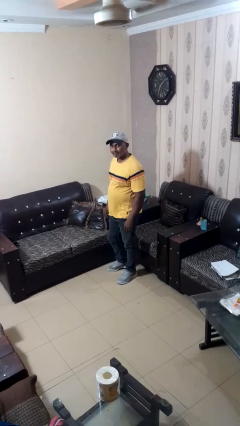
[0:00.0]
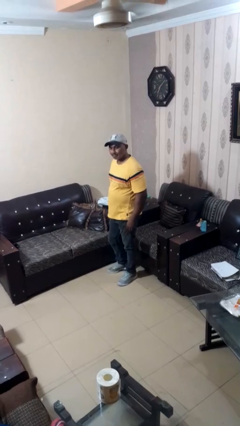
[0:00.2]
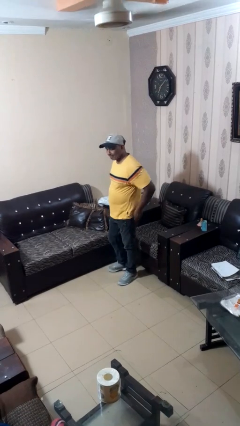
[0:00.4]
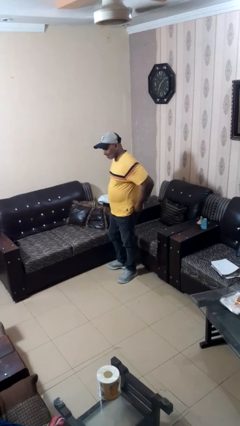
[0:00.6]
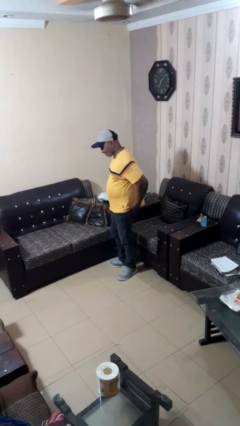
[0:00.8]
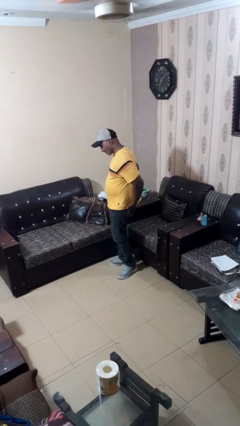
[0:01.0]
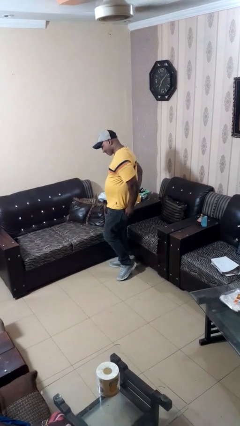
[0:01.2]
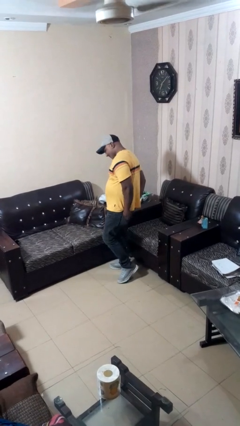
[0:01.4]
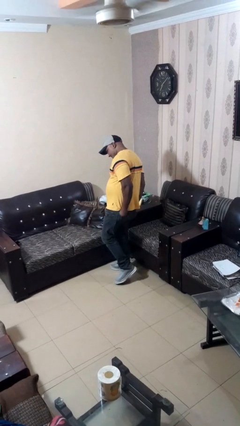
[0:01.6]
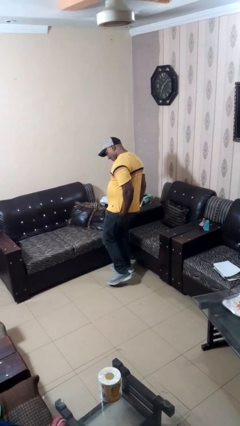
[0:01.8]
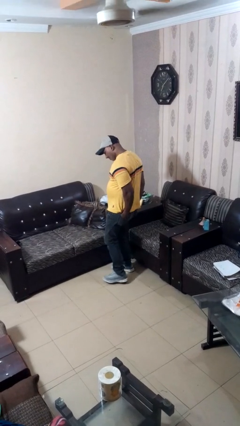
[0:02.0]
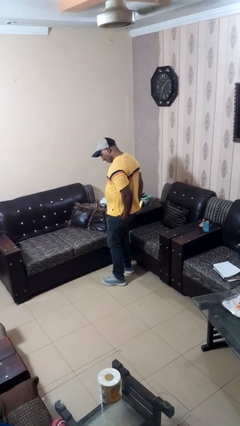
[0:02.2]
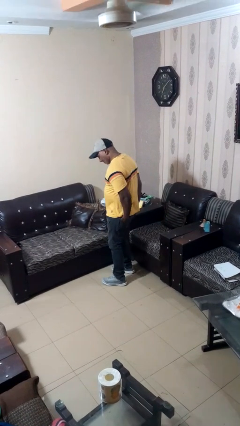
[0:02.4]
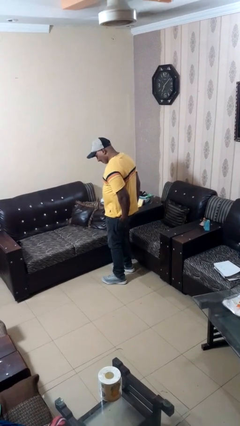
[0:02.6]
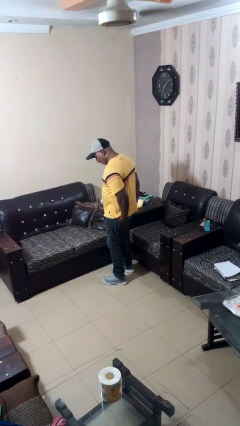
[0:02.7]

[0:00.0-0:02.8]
person puts hands in back pockets

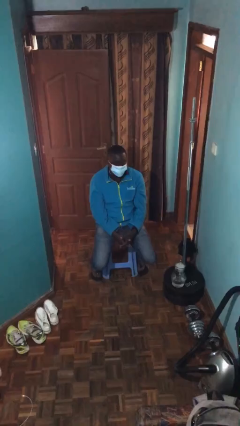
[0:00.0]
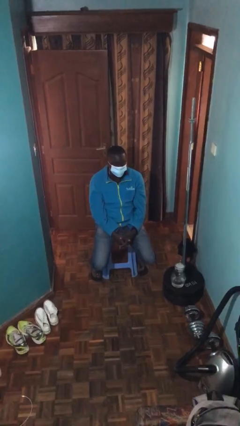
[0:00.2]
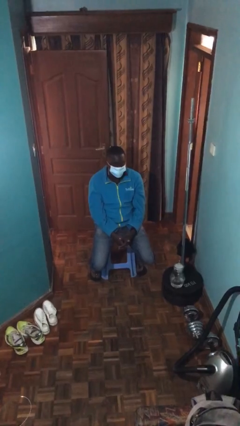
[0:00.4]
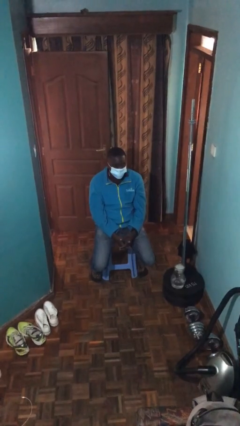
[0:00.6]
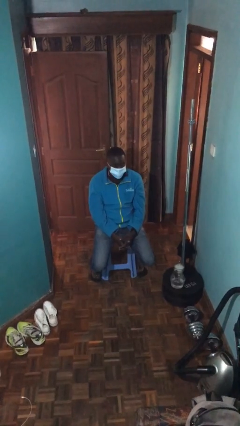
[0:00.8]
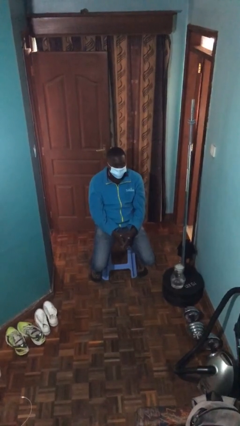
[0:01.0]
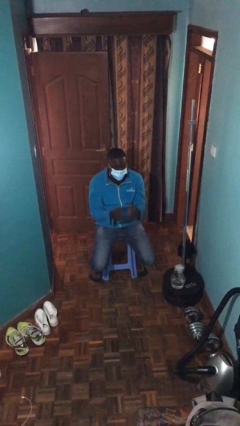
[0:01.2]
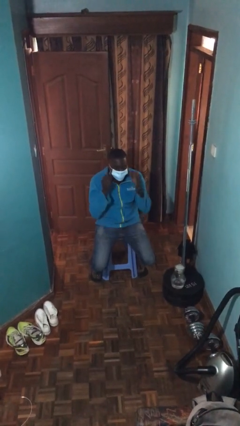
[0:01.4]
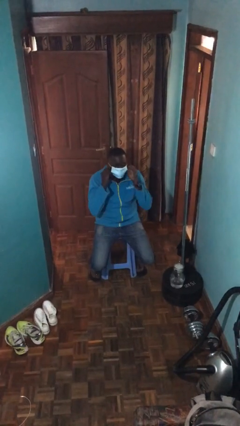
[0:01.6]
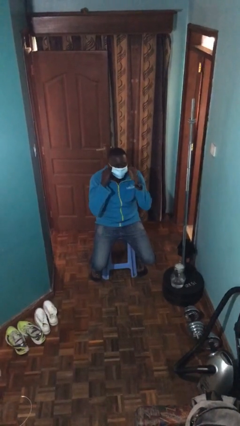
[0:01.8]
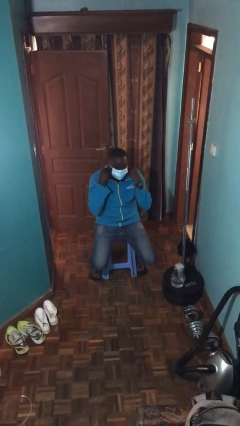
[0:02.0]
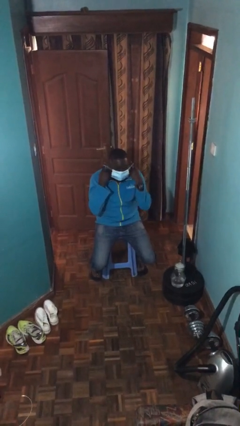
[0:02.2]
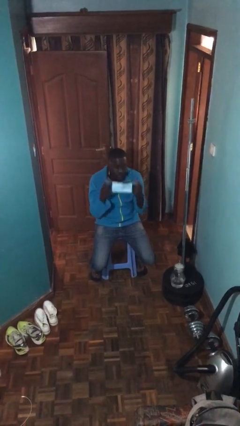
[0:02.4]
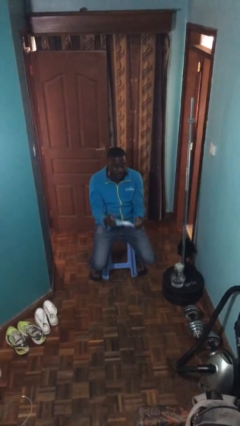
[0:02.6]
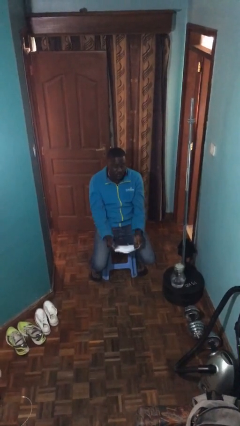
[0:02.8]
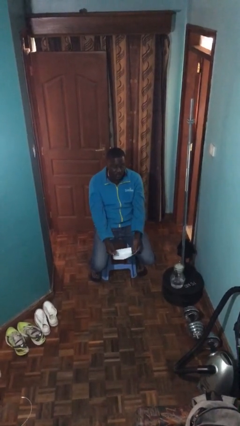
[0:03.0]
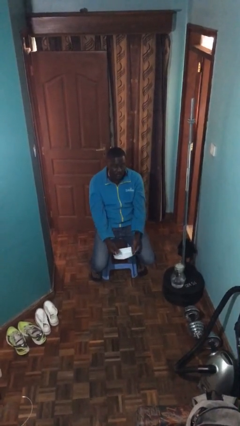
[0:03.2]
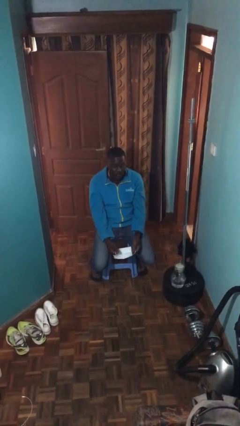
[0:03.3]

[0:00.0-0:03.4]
person takes off facemask

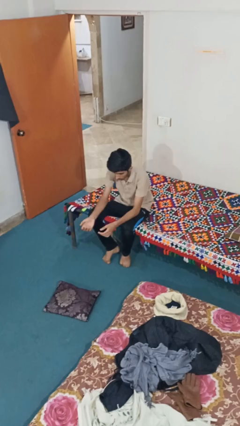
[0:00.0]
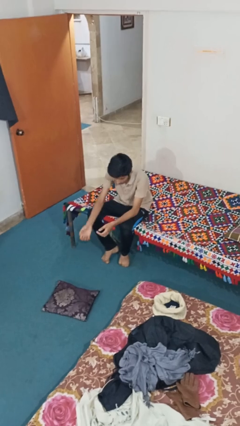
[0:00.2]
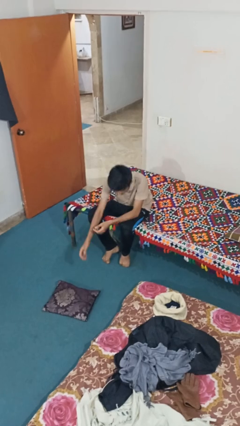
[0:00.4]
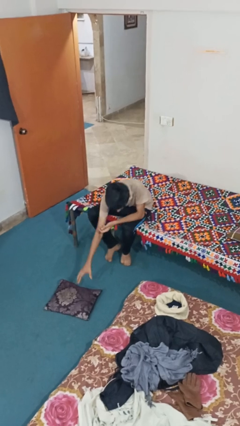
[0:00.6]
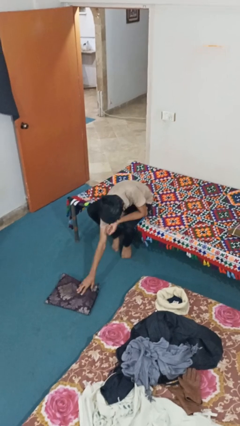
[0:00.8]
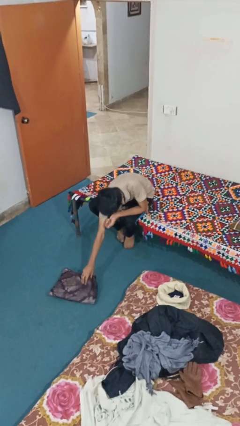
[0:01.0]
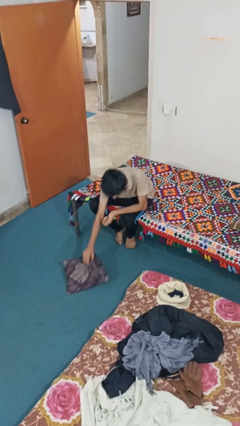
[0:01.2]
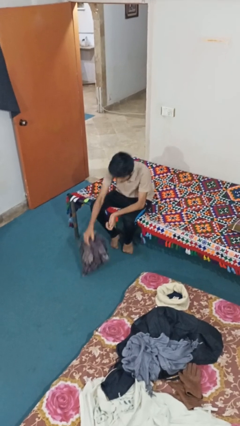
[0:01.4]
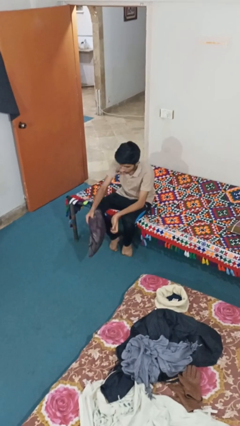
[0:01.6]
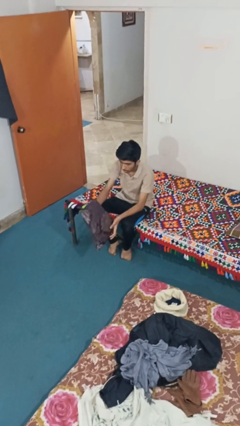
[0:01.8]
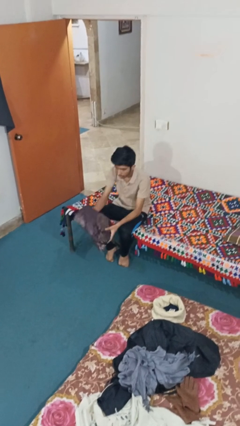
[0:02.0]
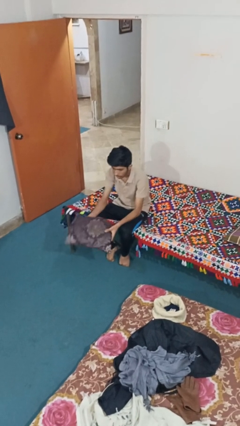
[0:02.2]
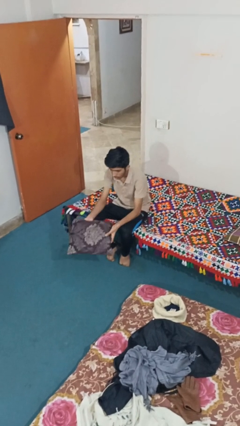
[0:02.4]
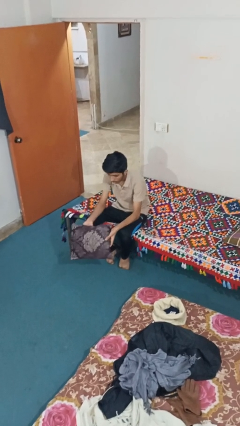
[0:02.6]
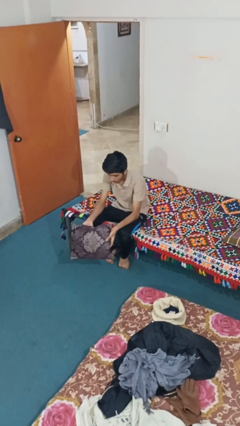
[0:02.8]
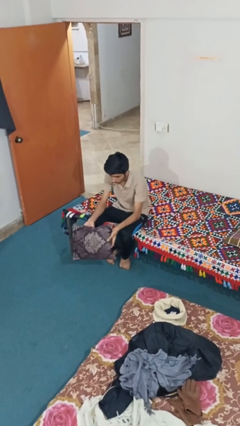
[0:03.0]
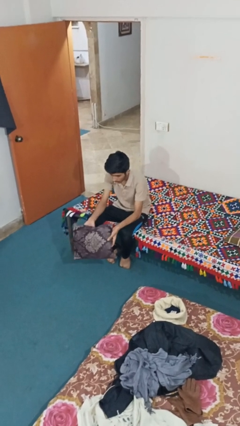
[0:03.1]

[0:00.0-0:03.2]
person picks up object from floor

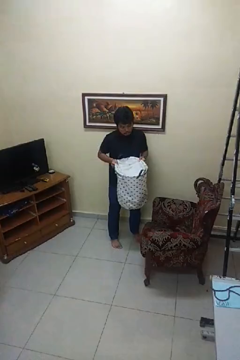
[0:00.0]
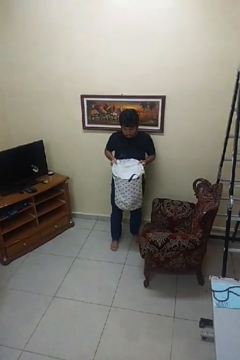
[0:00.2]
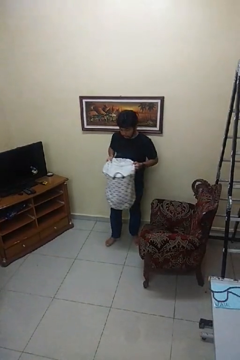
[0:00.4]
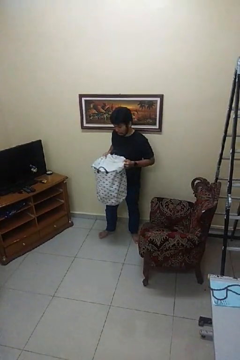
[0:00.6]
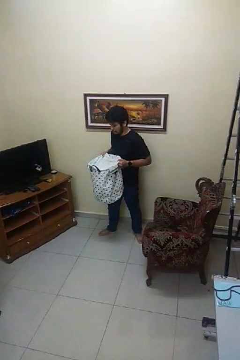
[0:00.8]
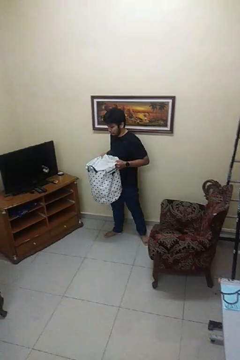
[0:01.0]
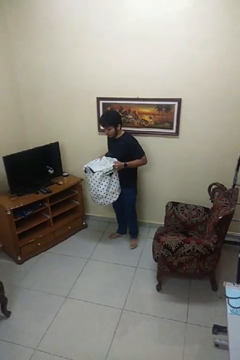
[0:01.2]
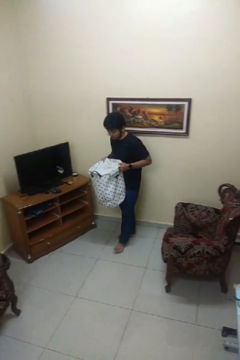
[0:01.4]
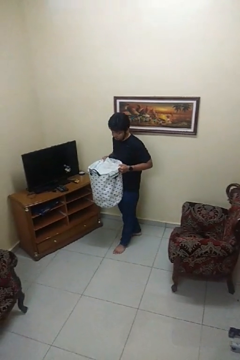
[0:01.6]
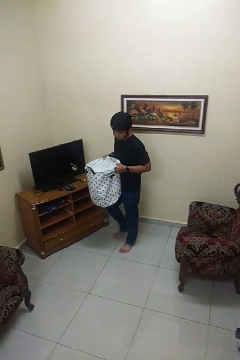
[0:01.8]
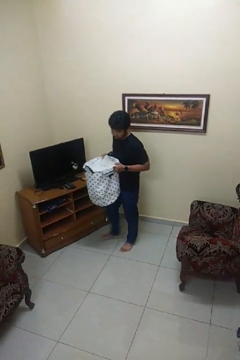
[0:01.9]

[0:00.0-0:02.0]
person carries laundry basket

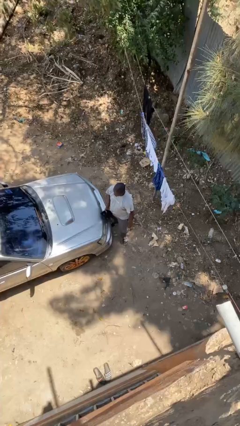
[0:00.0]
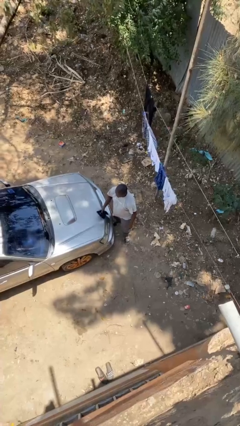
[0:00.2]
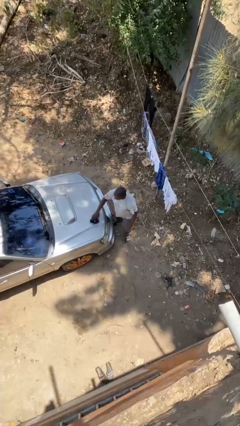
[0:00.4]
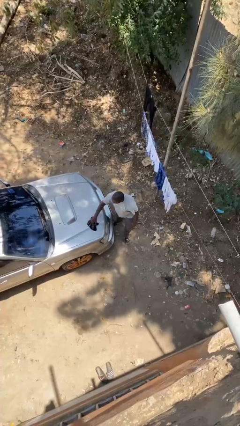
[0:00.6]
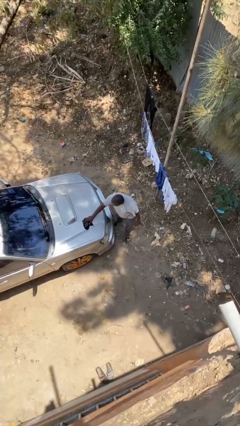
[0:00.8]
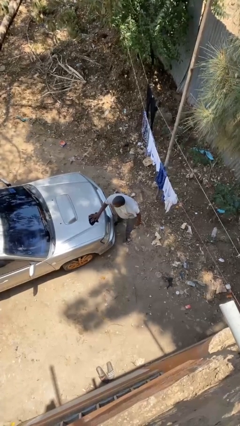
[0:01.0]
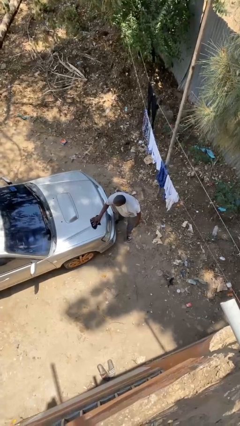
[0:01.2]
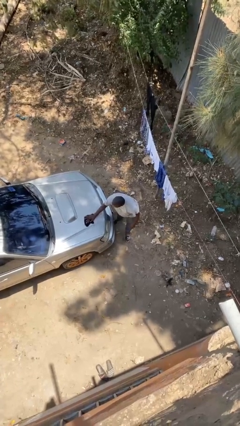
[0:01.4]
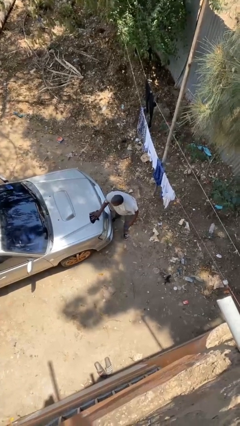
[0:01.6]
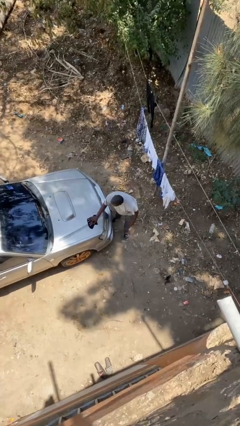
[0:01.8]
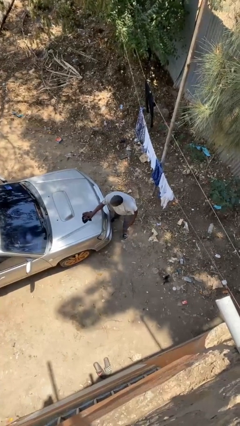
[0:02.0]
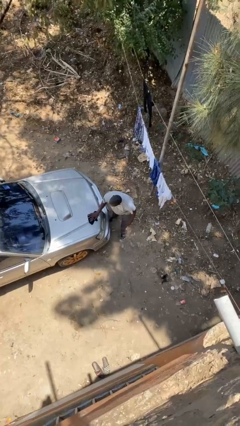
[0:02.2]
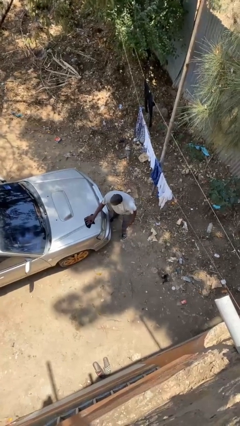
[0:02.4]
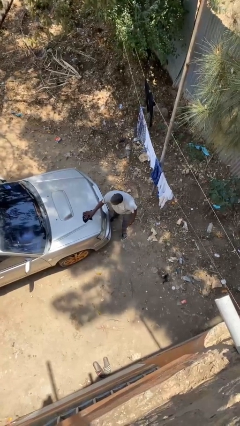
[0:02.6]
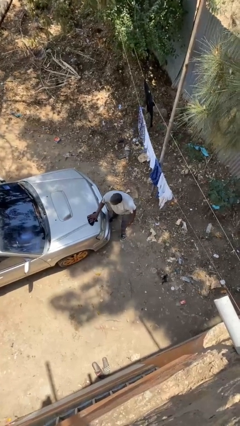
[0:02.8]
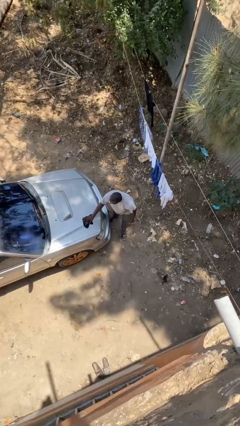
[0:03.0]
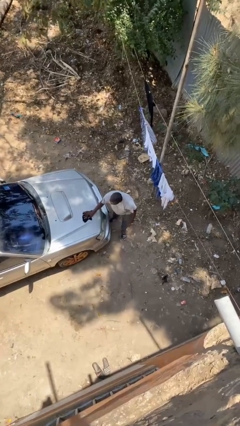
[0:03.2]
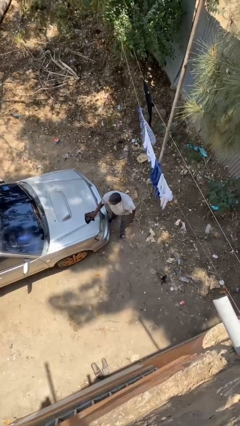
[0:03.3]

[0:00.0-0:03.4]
person polishes car with rag

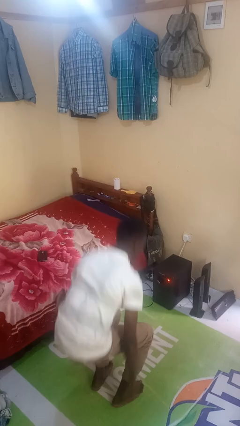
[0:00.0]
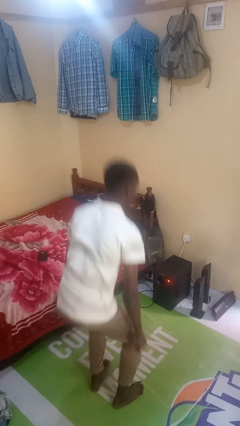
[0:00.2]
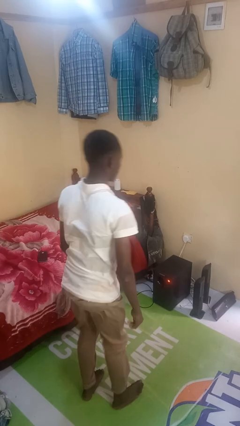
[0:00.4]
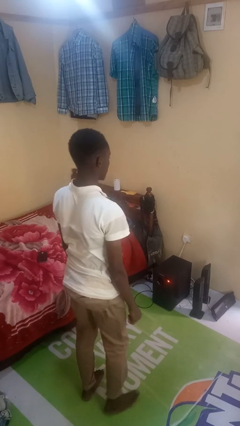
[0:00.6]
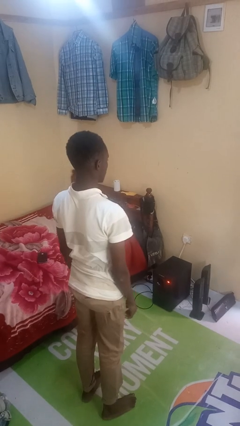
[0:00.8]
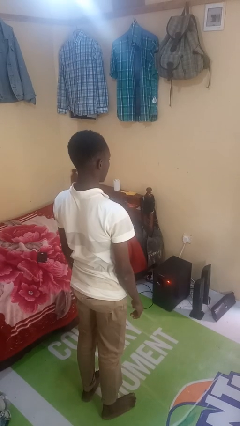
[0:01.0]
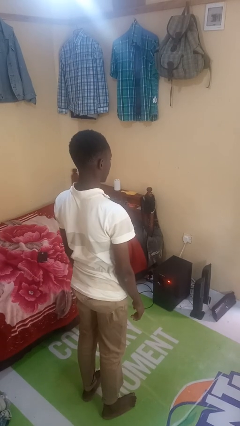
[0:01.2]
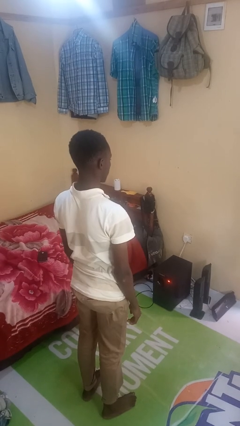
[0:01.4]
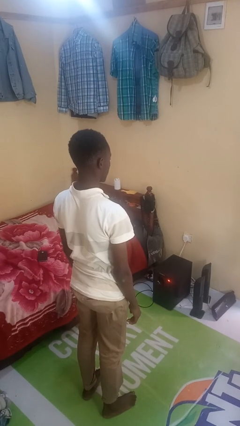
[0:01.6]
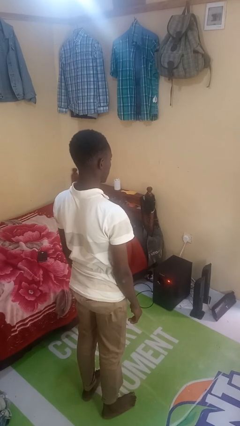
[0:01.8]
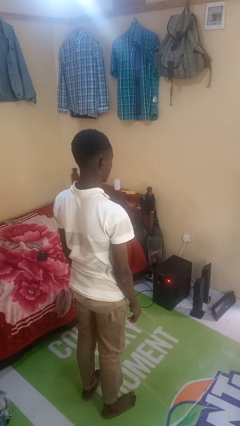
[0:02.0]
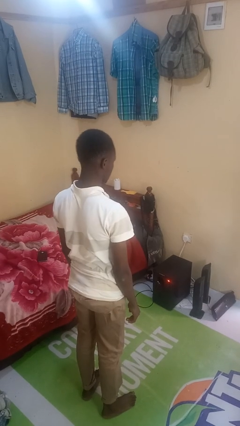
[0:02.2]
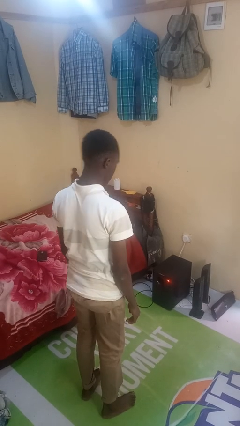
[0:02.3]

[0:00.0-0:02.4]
person stands up from floor
